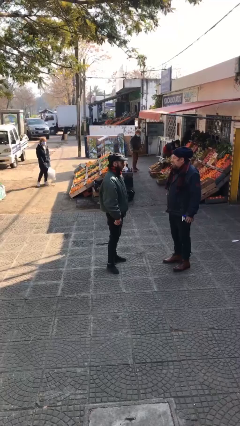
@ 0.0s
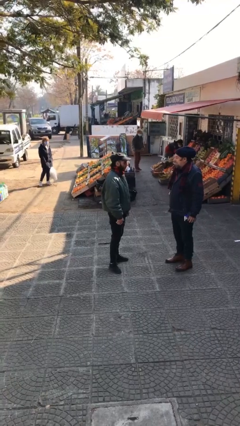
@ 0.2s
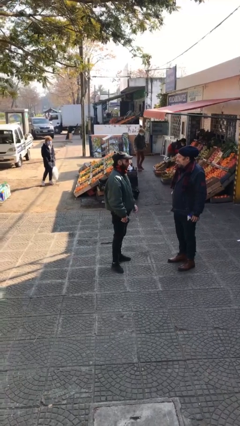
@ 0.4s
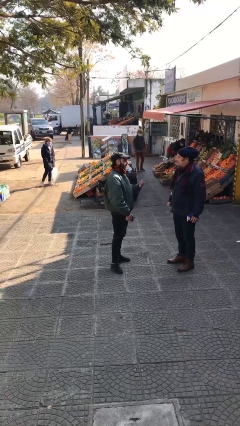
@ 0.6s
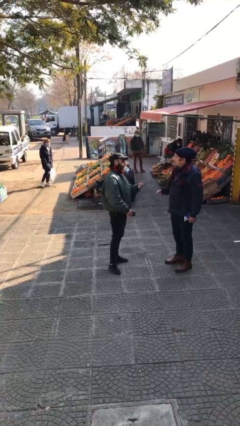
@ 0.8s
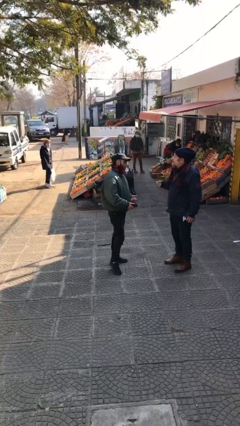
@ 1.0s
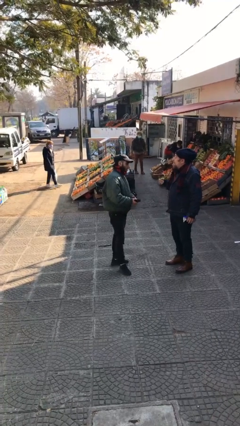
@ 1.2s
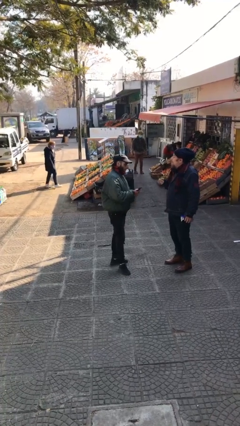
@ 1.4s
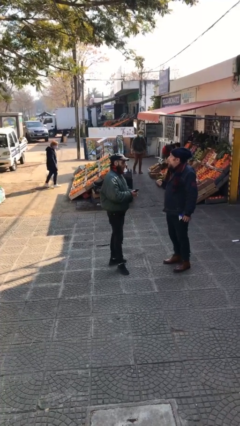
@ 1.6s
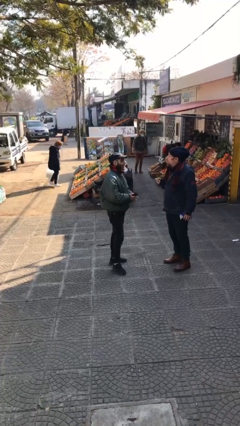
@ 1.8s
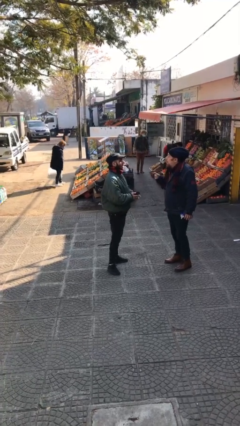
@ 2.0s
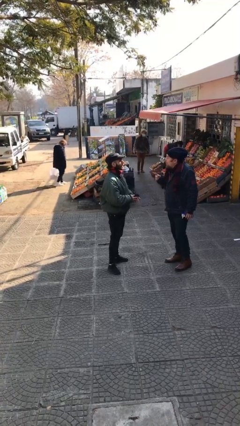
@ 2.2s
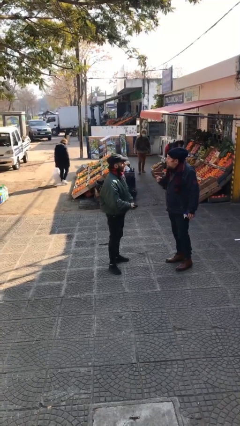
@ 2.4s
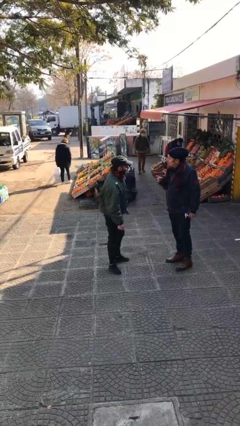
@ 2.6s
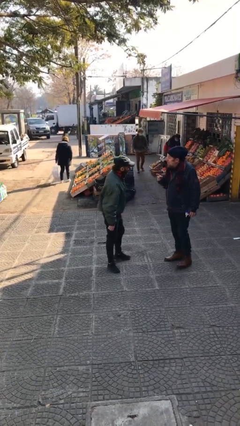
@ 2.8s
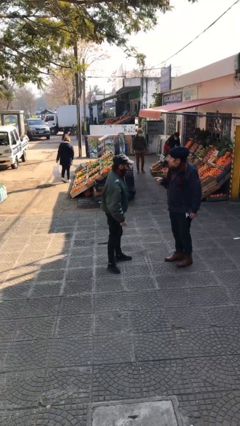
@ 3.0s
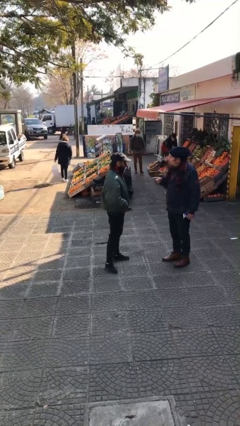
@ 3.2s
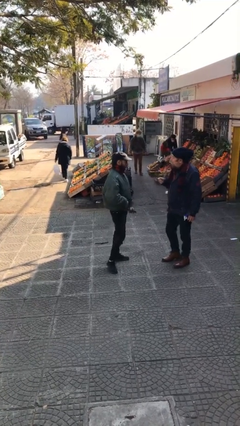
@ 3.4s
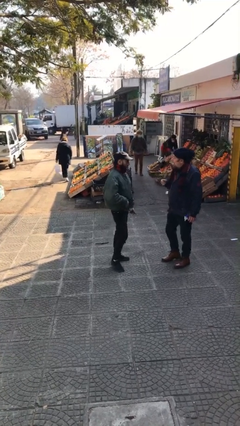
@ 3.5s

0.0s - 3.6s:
person talks to person

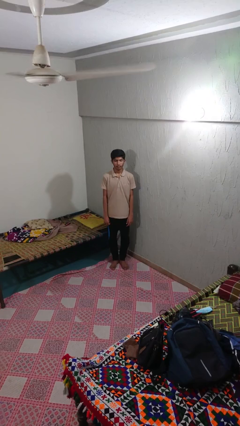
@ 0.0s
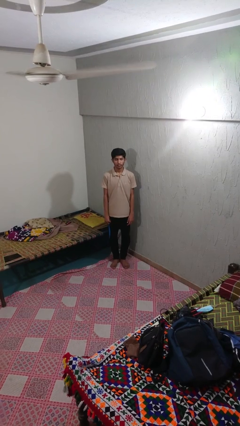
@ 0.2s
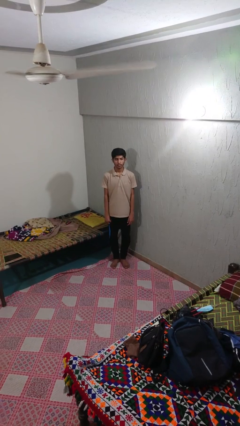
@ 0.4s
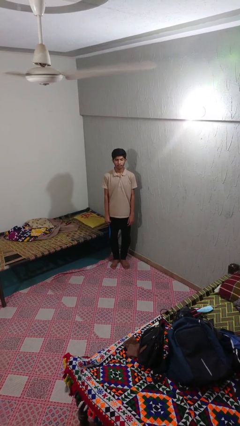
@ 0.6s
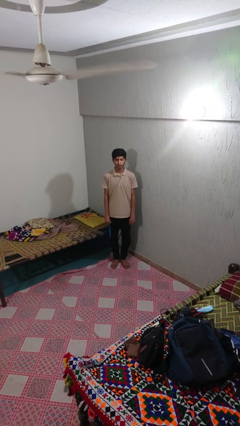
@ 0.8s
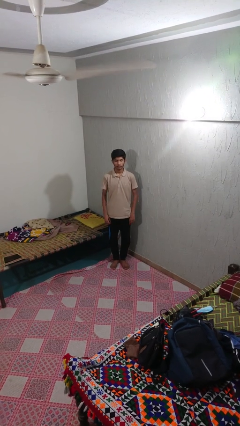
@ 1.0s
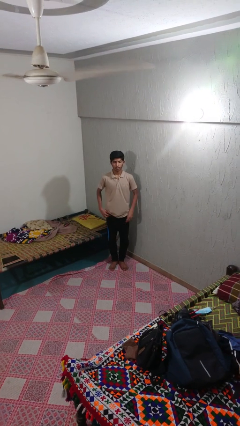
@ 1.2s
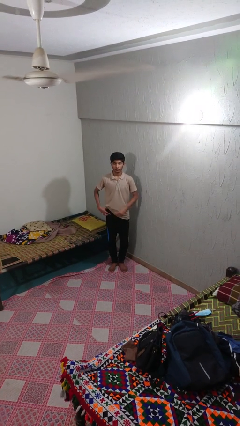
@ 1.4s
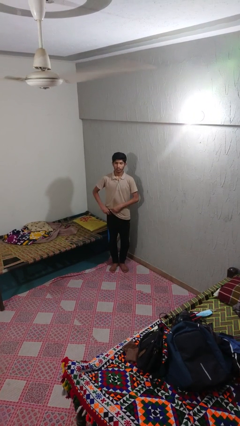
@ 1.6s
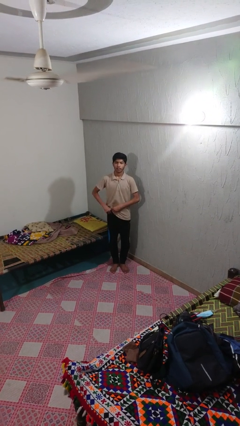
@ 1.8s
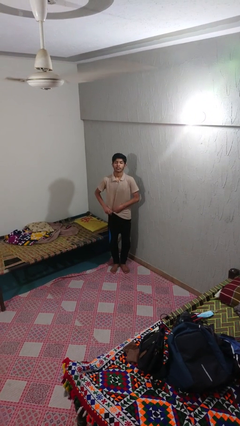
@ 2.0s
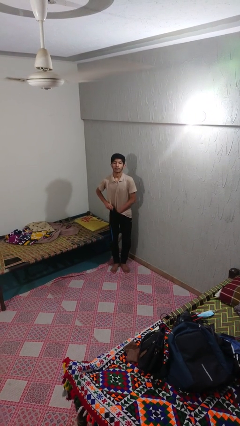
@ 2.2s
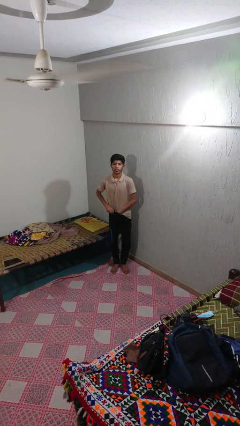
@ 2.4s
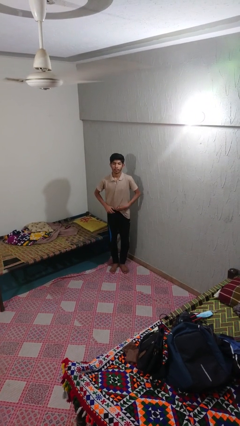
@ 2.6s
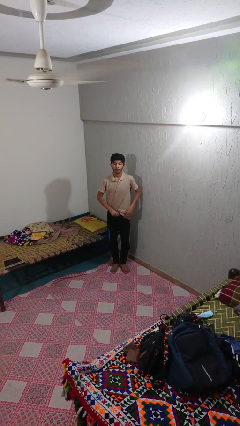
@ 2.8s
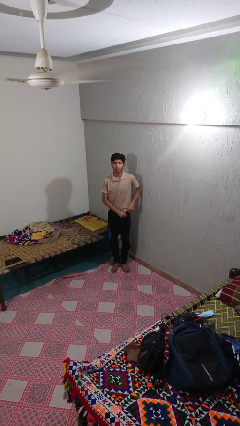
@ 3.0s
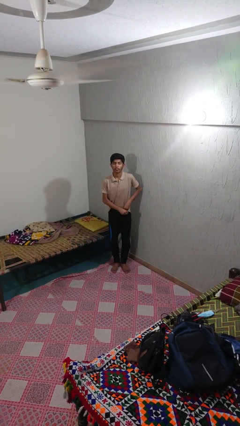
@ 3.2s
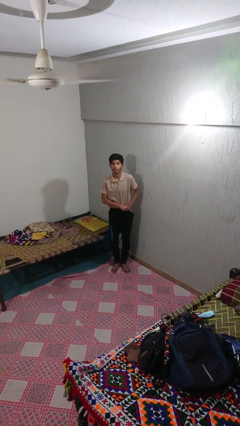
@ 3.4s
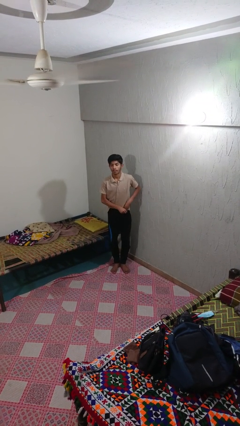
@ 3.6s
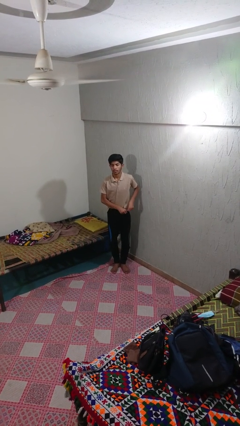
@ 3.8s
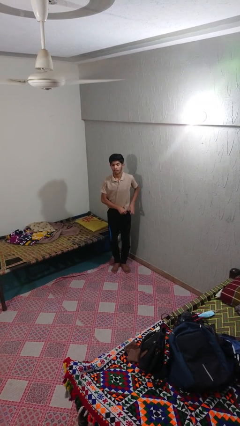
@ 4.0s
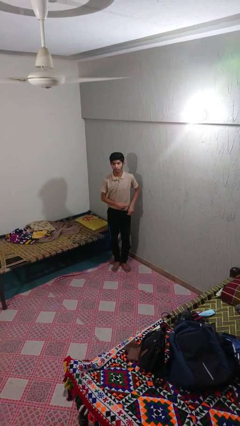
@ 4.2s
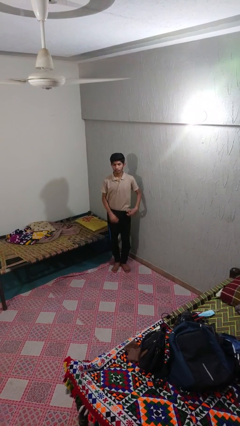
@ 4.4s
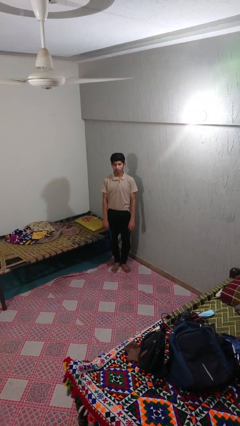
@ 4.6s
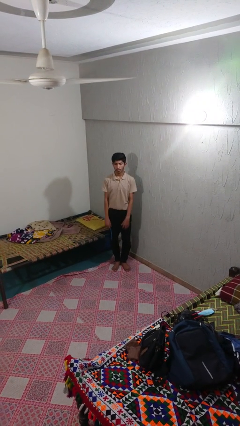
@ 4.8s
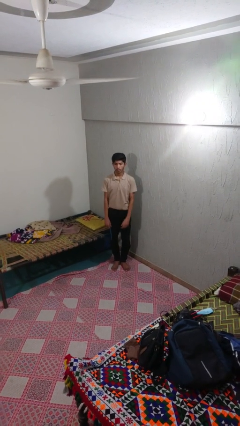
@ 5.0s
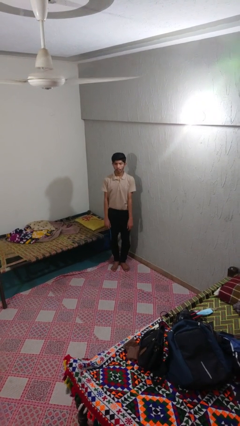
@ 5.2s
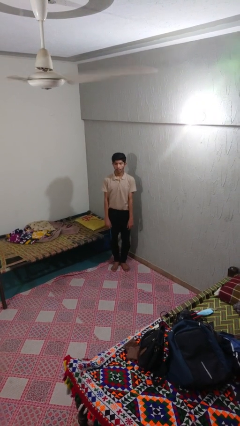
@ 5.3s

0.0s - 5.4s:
person tucks in shirt

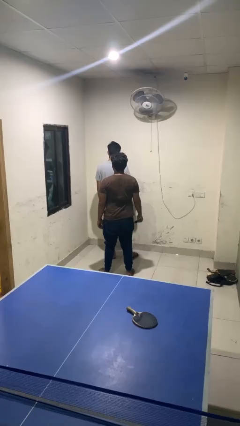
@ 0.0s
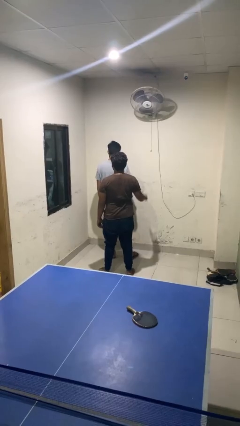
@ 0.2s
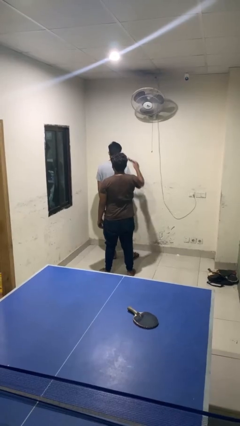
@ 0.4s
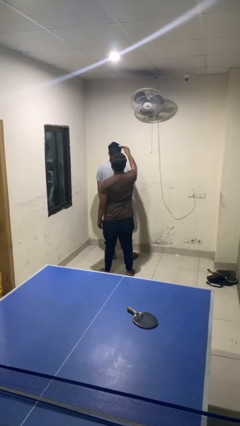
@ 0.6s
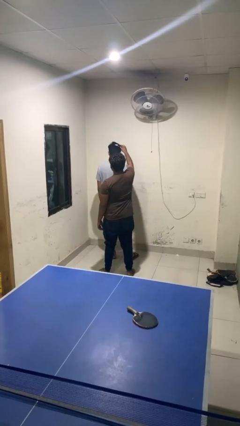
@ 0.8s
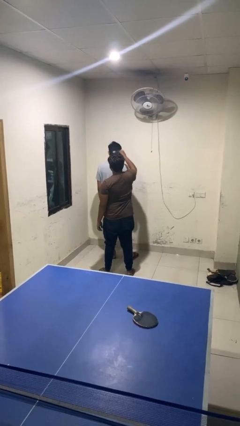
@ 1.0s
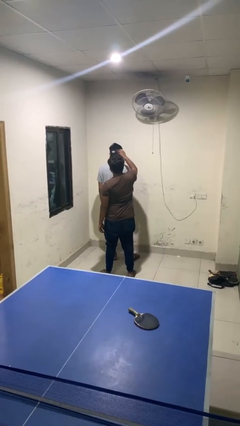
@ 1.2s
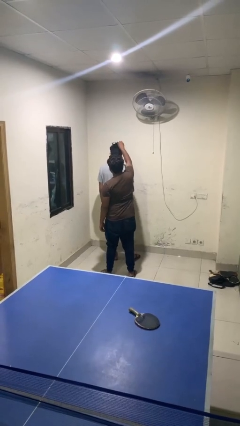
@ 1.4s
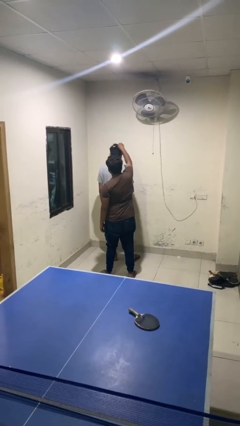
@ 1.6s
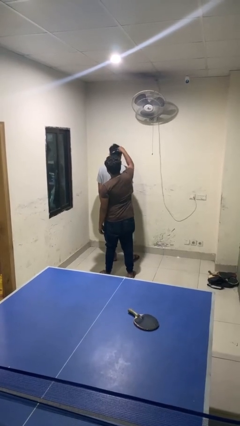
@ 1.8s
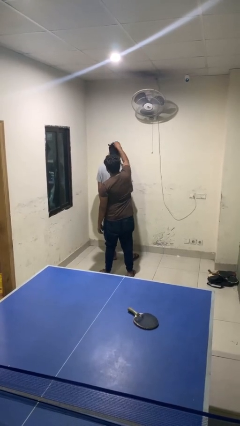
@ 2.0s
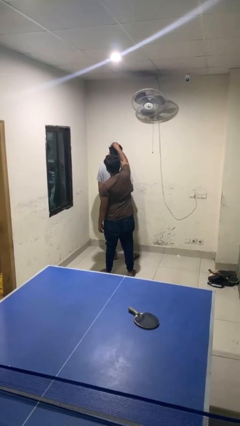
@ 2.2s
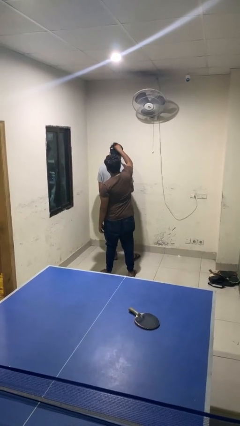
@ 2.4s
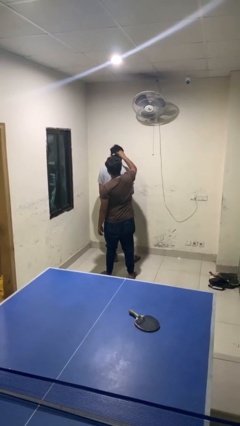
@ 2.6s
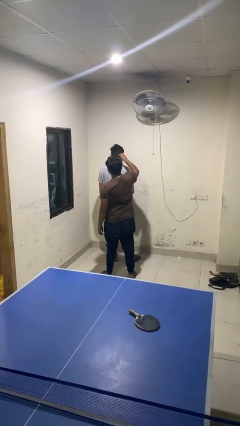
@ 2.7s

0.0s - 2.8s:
person brushes hair of person

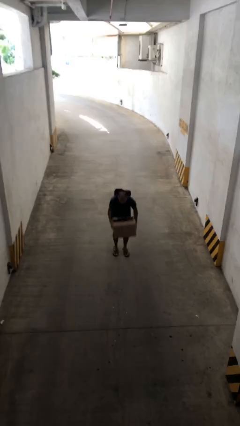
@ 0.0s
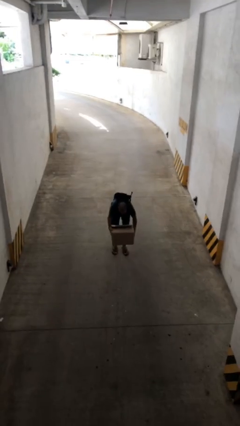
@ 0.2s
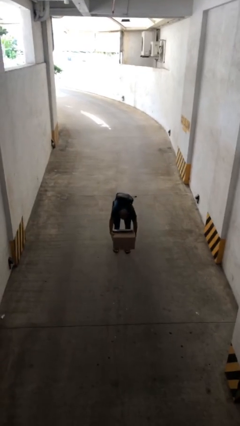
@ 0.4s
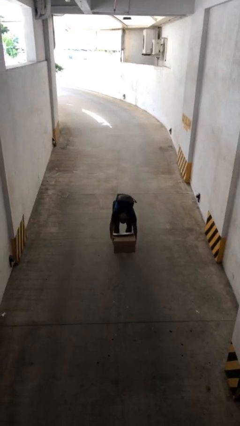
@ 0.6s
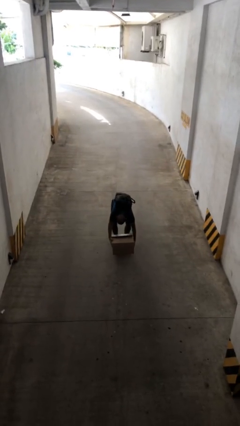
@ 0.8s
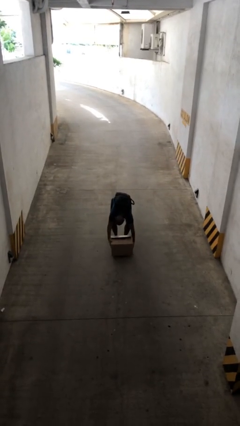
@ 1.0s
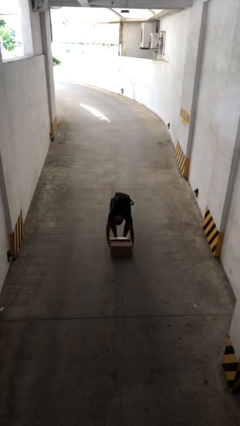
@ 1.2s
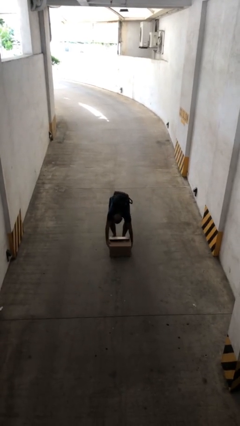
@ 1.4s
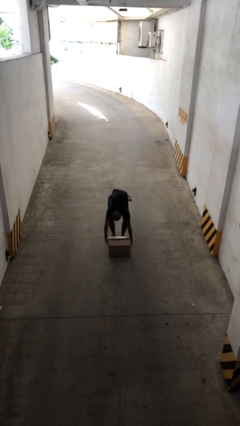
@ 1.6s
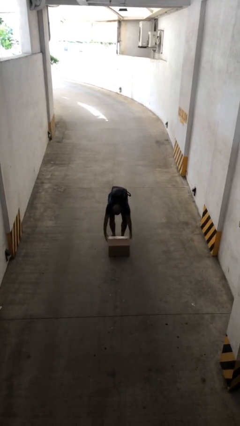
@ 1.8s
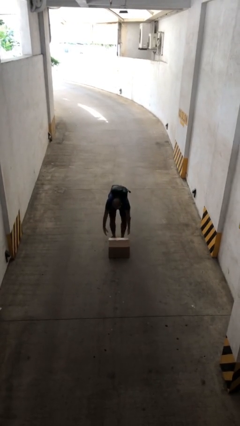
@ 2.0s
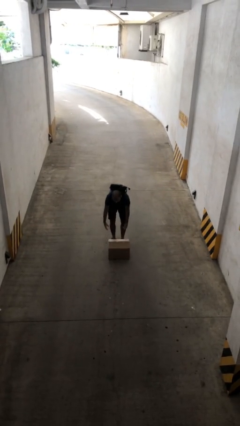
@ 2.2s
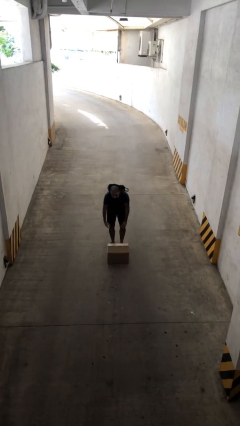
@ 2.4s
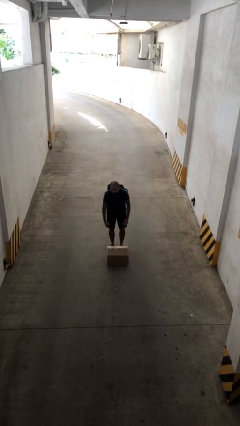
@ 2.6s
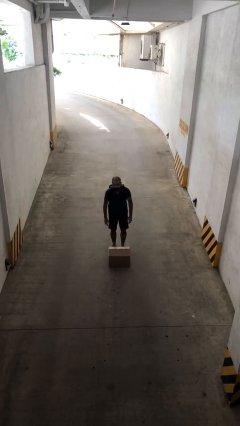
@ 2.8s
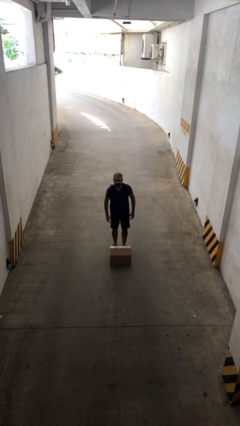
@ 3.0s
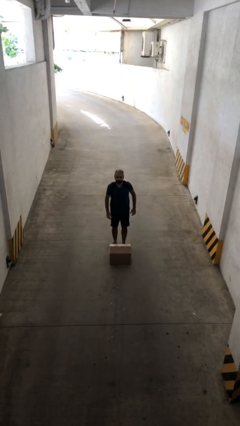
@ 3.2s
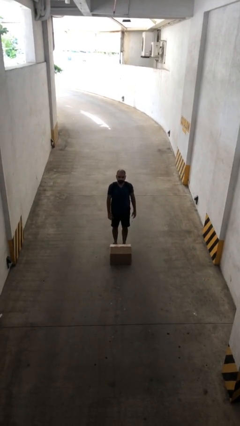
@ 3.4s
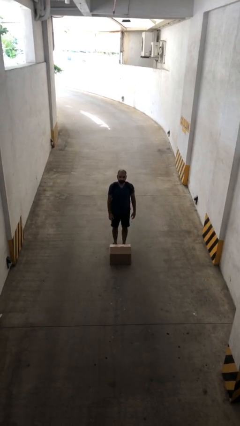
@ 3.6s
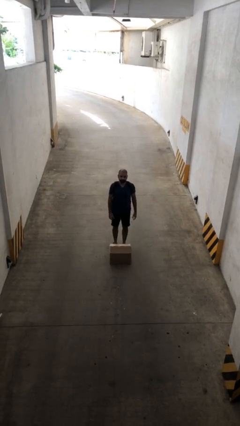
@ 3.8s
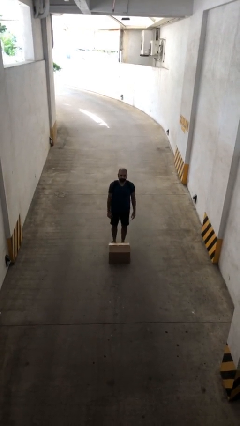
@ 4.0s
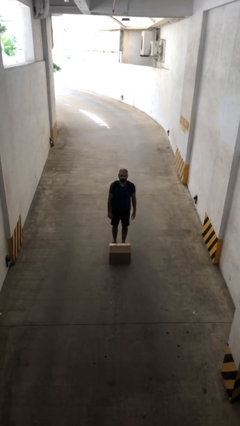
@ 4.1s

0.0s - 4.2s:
person puts down object on floor

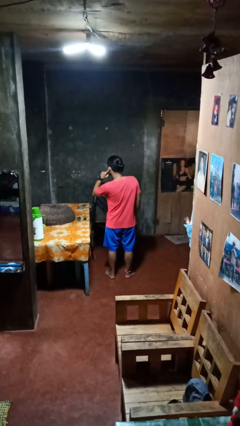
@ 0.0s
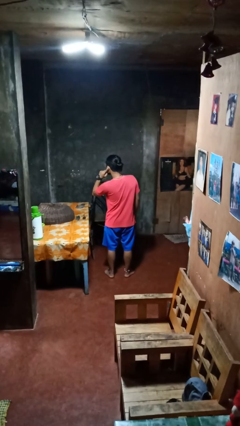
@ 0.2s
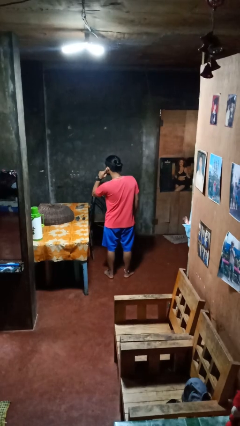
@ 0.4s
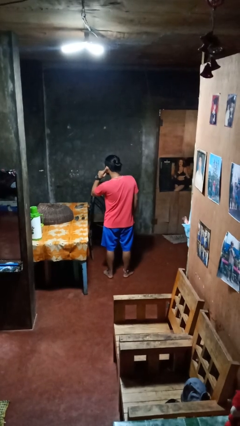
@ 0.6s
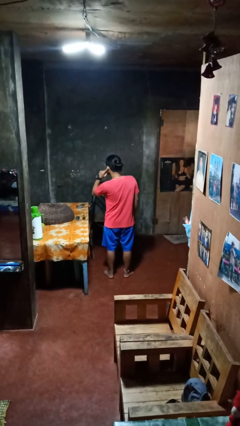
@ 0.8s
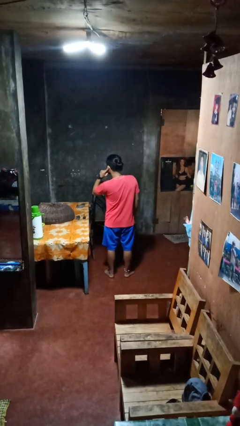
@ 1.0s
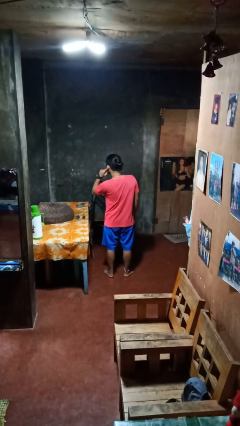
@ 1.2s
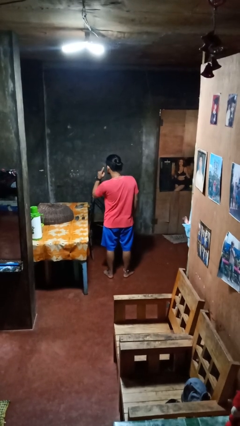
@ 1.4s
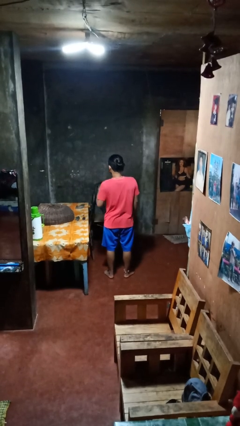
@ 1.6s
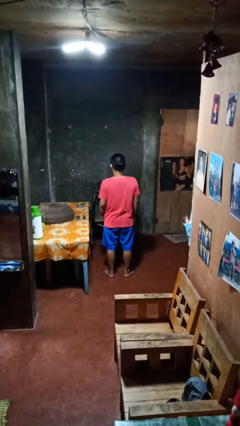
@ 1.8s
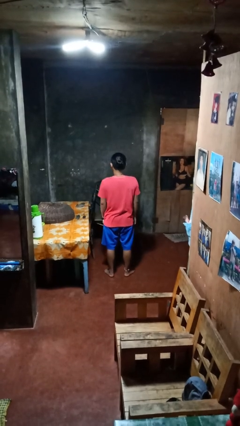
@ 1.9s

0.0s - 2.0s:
person gestures listen closely
